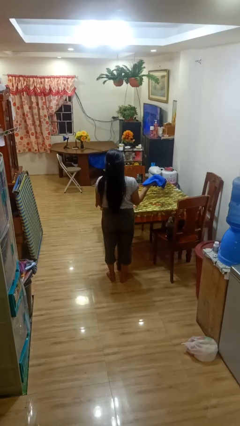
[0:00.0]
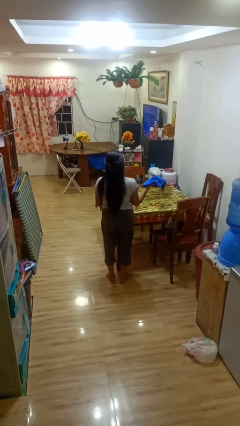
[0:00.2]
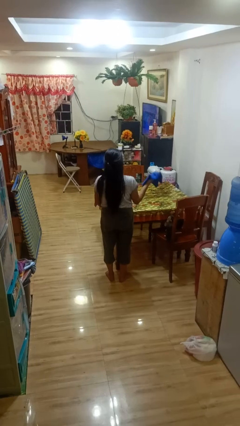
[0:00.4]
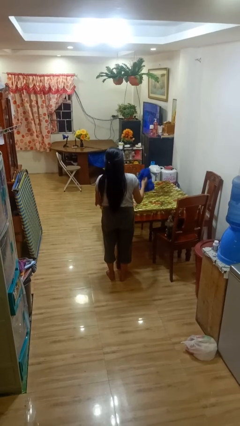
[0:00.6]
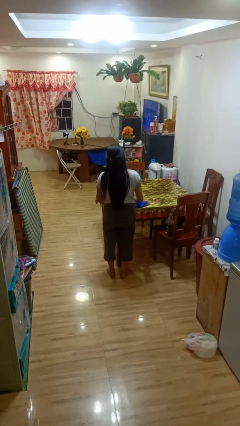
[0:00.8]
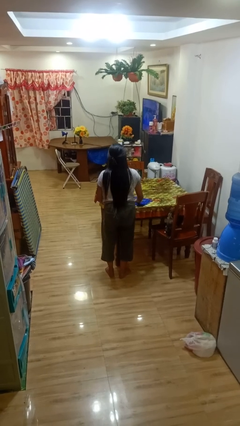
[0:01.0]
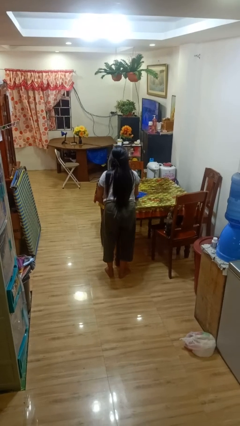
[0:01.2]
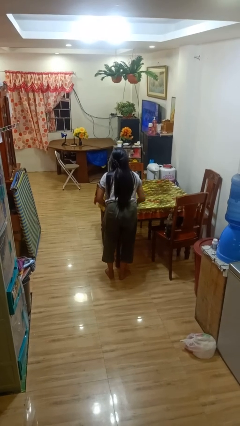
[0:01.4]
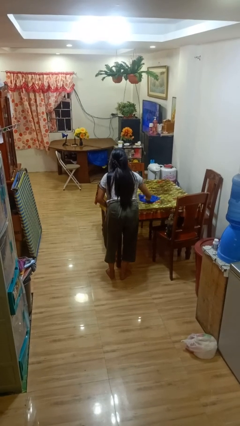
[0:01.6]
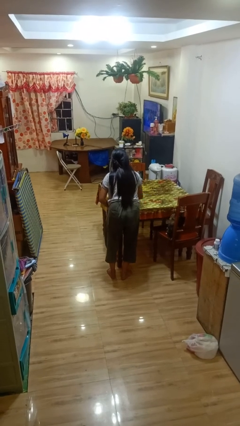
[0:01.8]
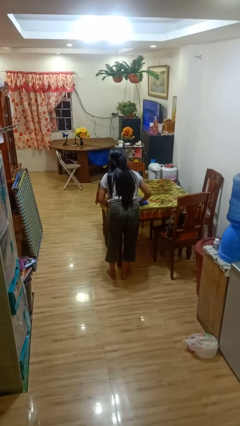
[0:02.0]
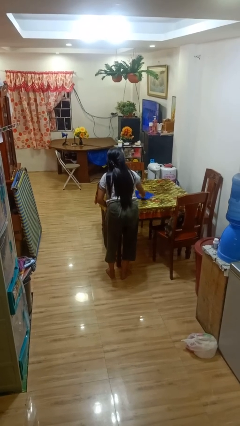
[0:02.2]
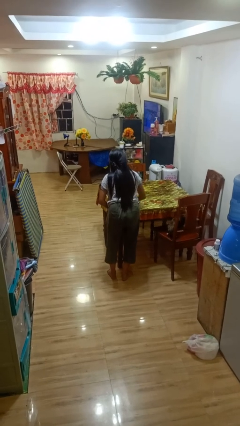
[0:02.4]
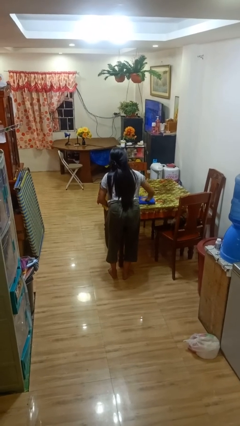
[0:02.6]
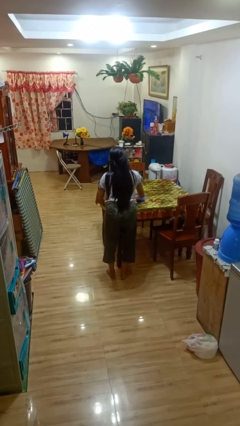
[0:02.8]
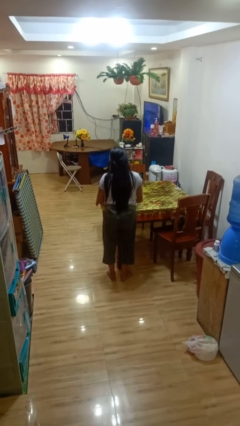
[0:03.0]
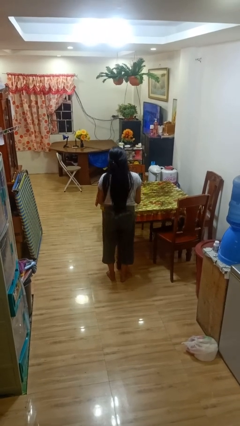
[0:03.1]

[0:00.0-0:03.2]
person cleans table with rag

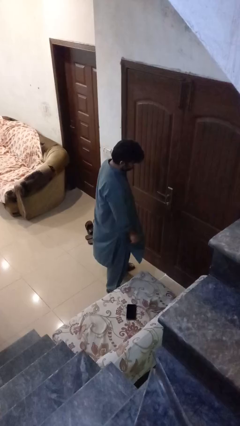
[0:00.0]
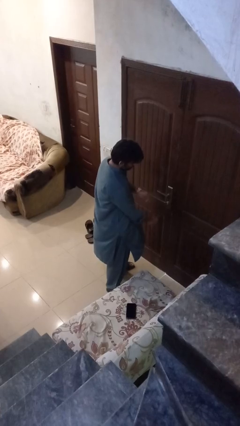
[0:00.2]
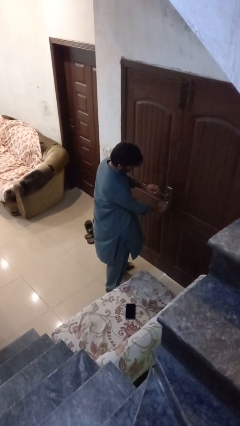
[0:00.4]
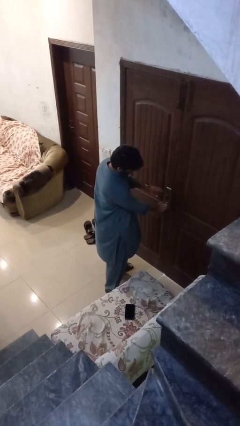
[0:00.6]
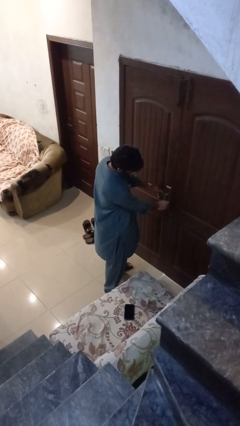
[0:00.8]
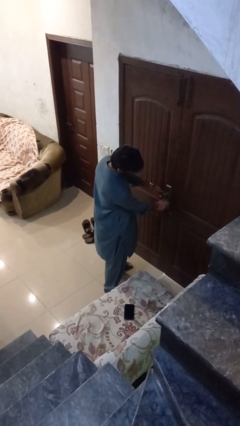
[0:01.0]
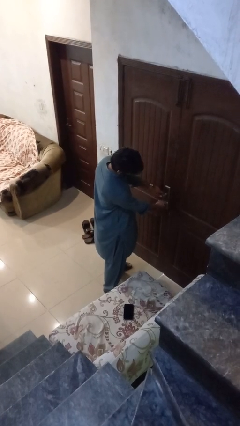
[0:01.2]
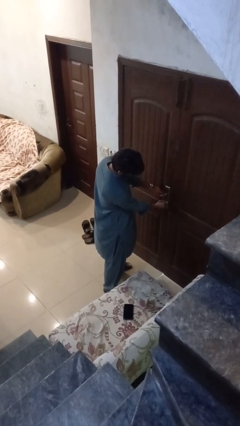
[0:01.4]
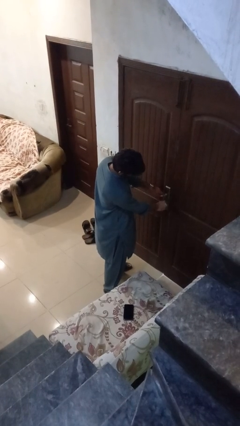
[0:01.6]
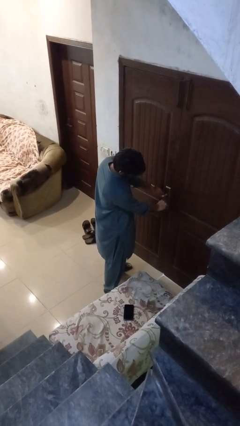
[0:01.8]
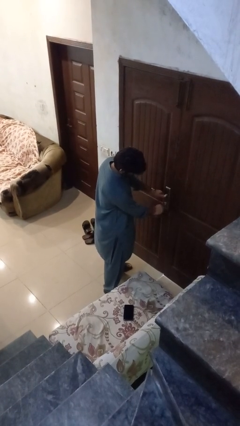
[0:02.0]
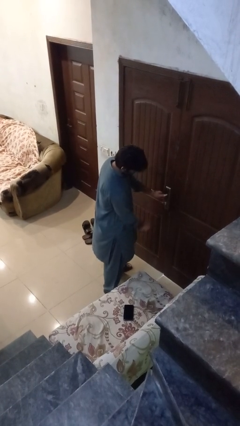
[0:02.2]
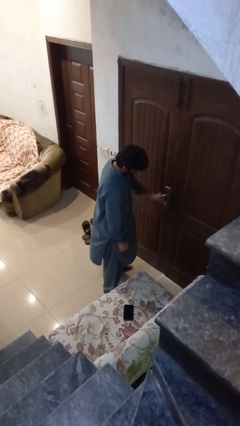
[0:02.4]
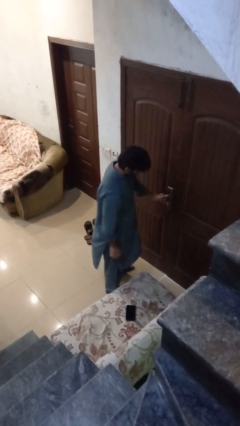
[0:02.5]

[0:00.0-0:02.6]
person unlocks door with keys

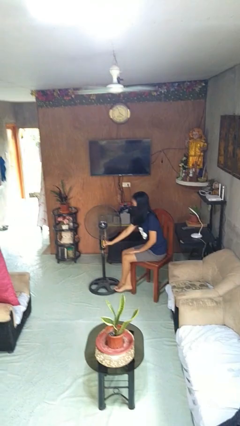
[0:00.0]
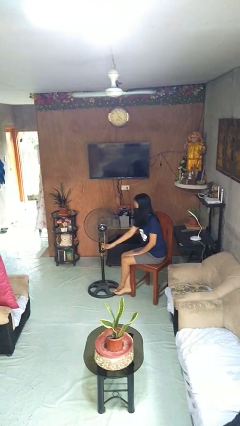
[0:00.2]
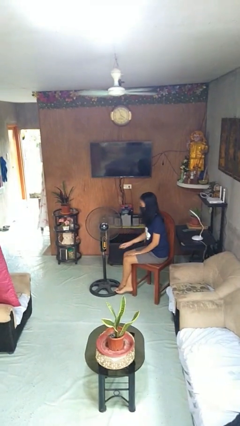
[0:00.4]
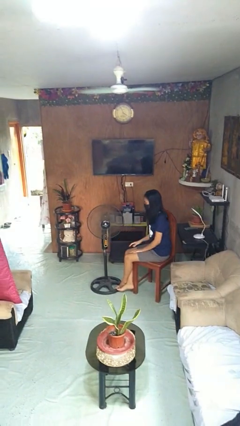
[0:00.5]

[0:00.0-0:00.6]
person turns off fan

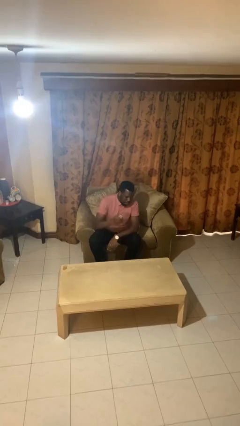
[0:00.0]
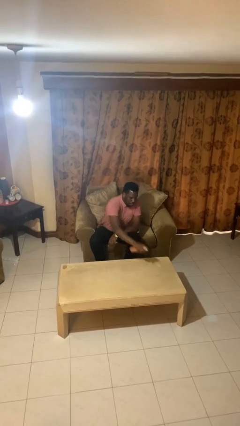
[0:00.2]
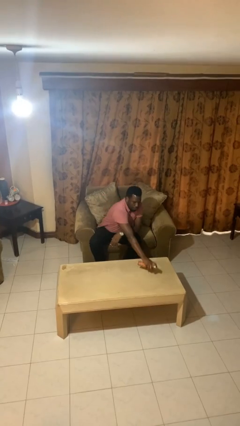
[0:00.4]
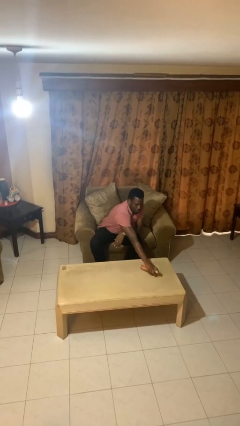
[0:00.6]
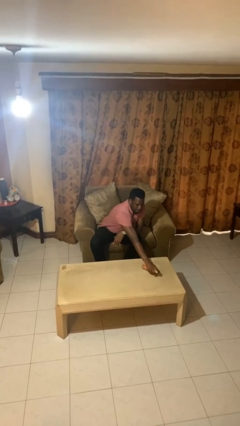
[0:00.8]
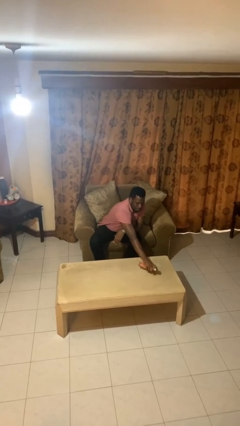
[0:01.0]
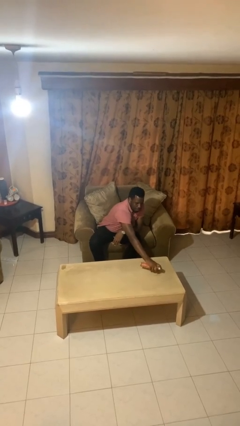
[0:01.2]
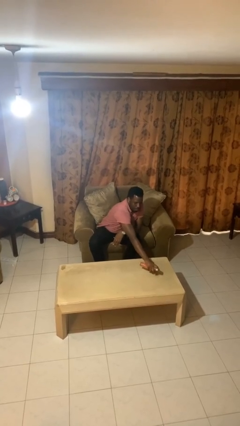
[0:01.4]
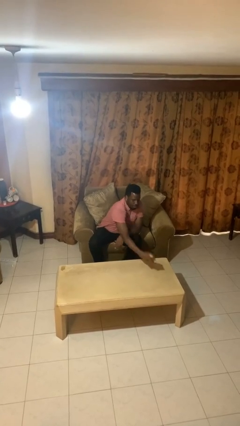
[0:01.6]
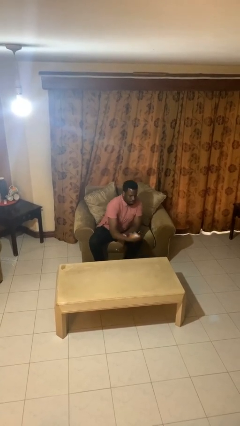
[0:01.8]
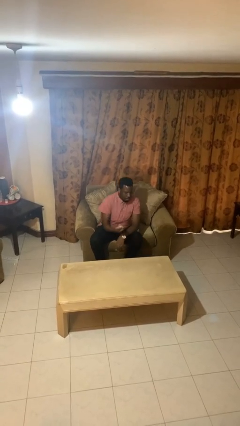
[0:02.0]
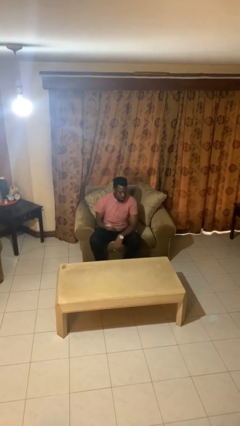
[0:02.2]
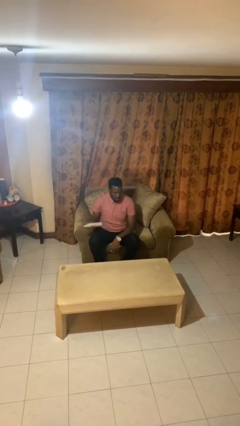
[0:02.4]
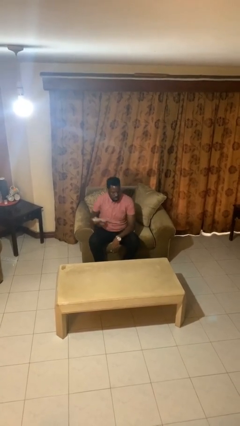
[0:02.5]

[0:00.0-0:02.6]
person sprays from bottle

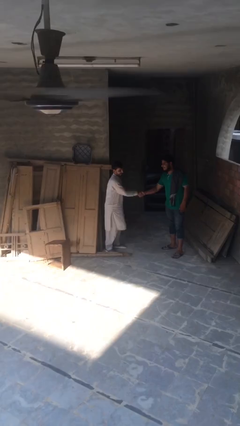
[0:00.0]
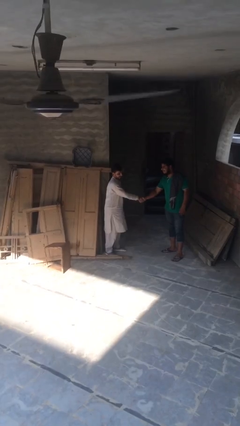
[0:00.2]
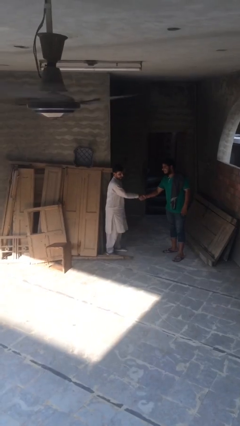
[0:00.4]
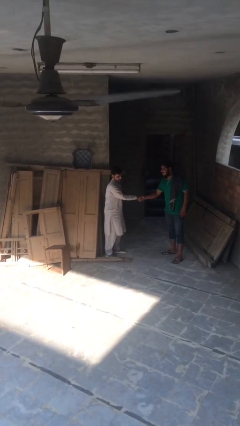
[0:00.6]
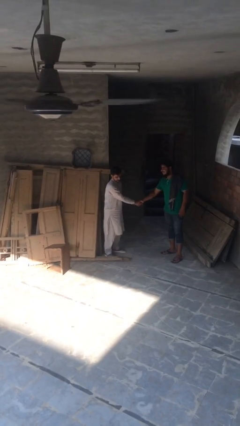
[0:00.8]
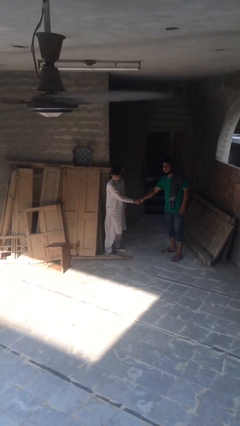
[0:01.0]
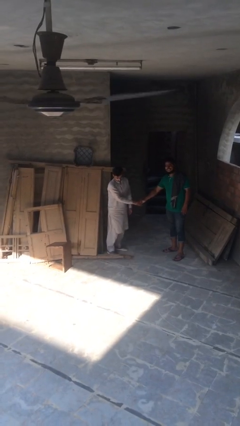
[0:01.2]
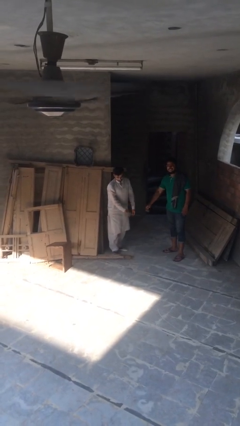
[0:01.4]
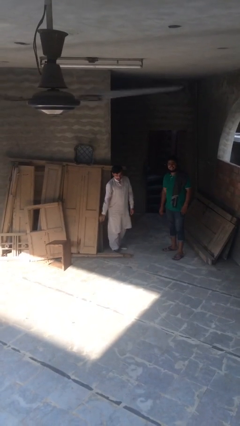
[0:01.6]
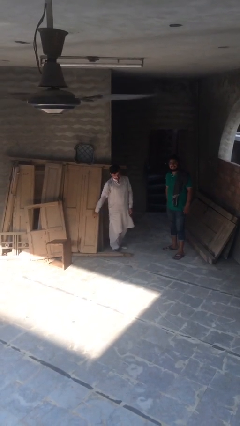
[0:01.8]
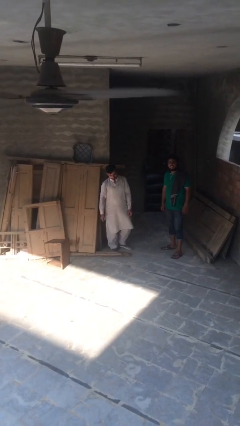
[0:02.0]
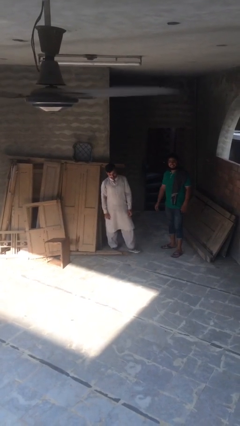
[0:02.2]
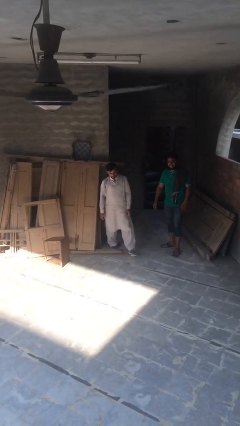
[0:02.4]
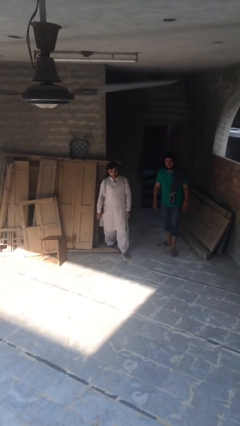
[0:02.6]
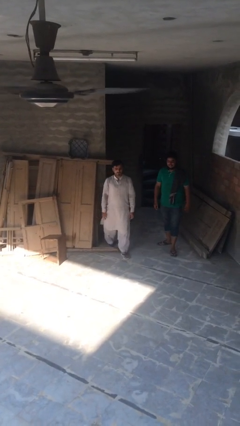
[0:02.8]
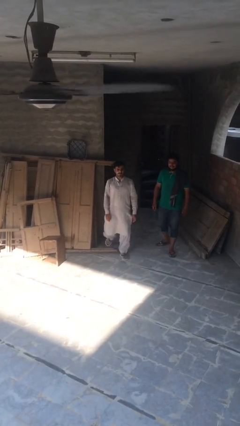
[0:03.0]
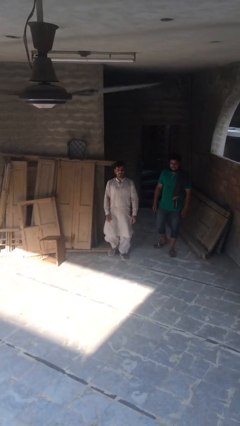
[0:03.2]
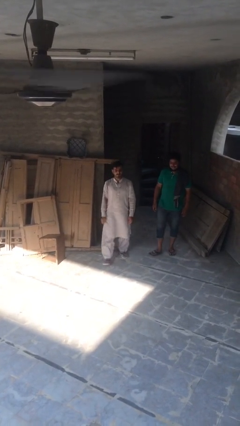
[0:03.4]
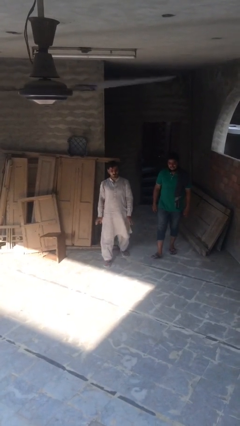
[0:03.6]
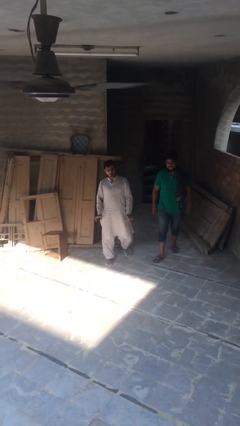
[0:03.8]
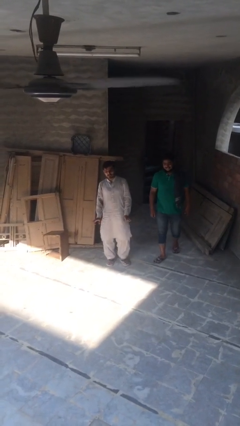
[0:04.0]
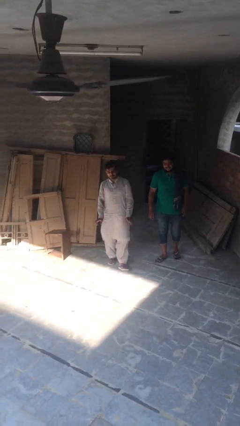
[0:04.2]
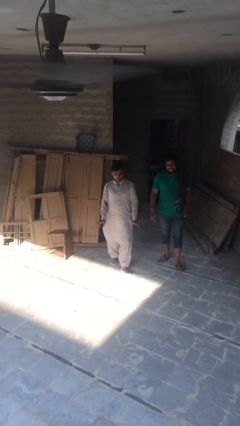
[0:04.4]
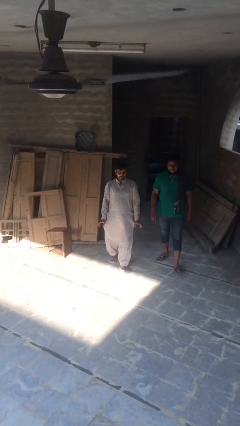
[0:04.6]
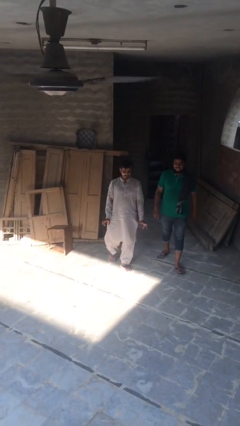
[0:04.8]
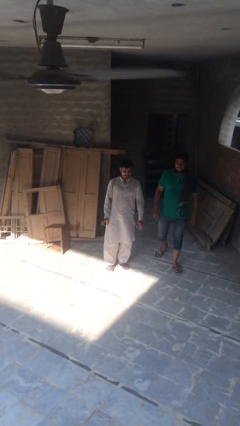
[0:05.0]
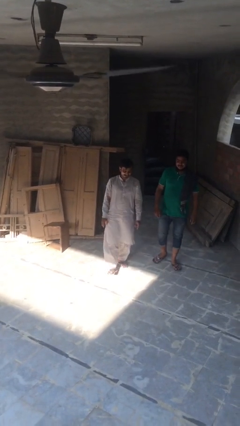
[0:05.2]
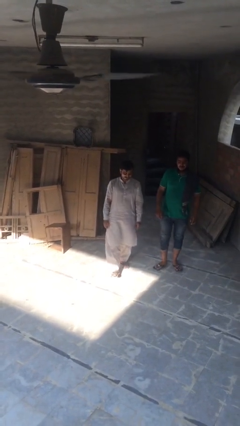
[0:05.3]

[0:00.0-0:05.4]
person talks to person

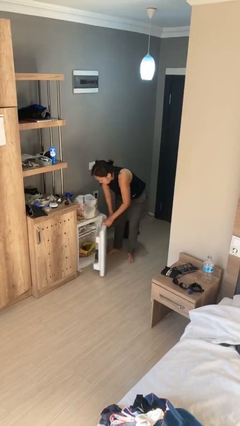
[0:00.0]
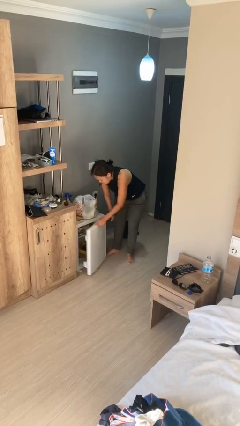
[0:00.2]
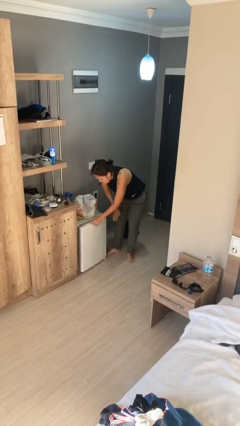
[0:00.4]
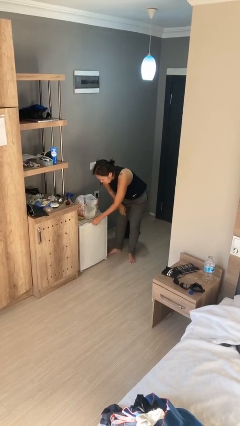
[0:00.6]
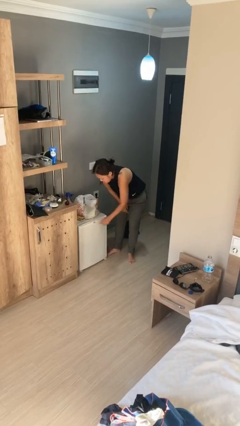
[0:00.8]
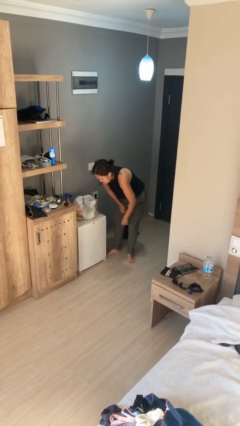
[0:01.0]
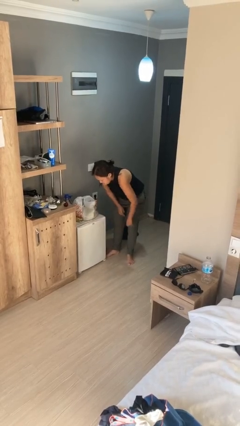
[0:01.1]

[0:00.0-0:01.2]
person closes refrigerator

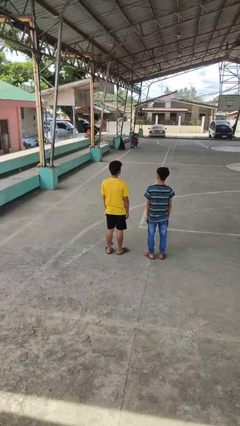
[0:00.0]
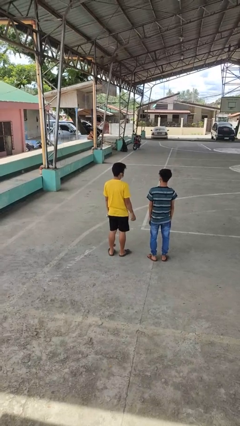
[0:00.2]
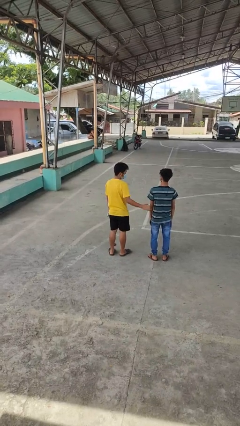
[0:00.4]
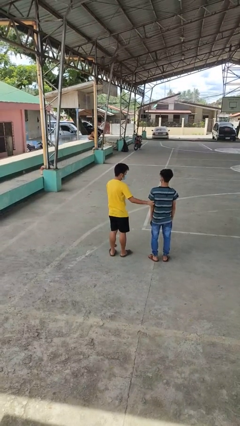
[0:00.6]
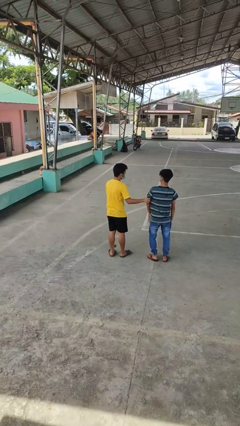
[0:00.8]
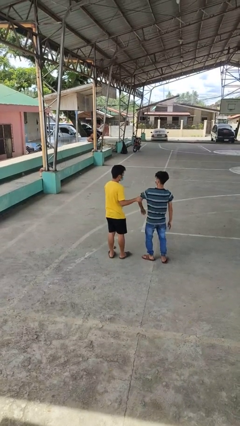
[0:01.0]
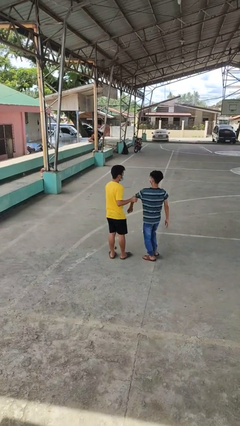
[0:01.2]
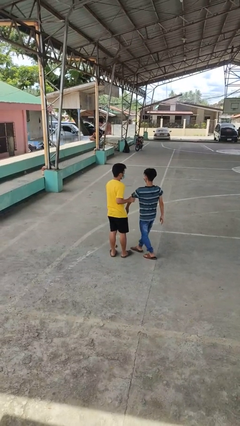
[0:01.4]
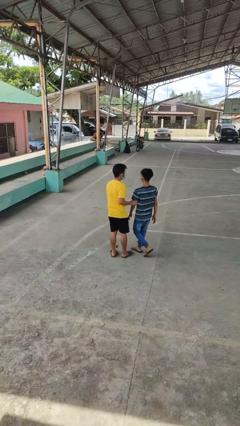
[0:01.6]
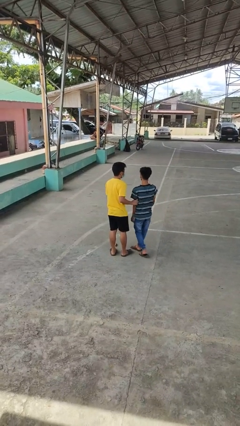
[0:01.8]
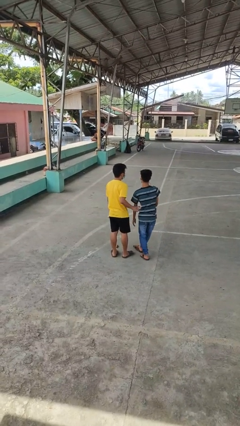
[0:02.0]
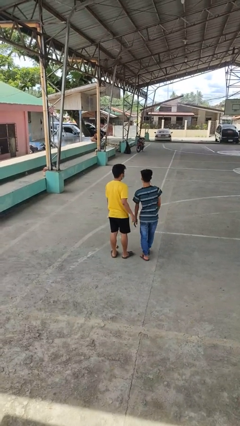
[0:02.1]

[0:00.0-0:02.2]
person grabs person by bicep
